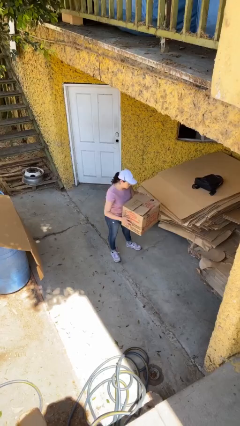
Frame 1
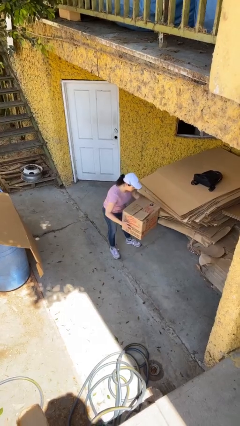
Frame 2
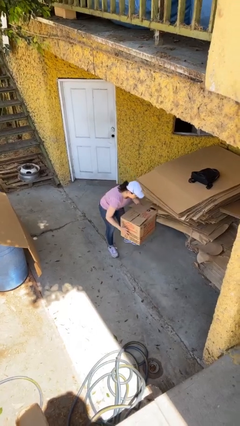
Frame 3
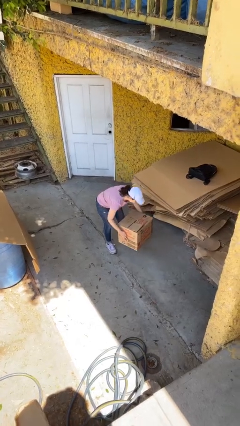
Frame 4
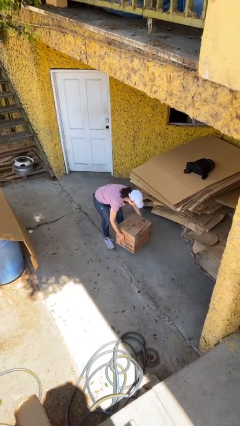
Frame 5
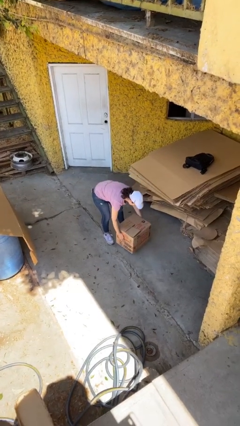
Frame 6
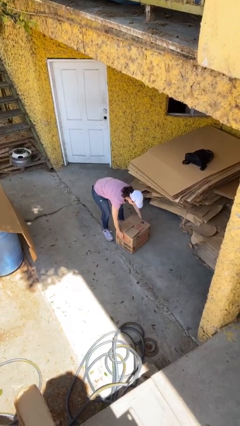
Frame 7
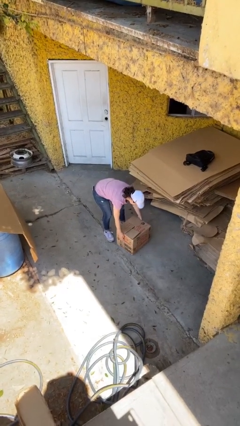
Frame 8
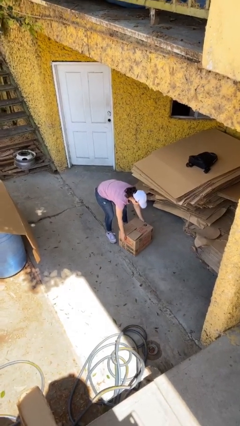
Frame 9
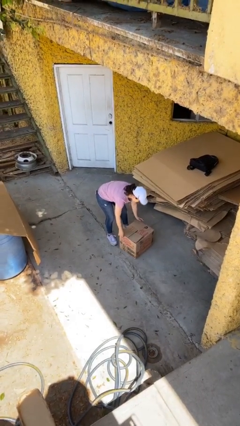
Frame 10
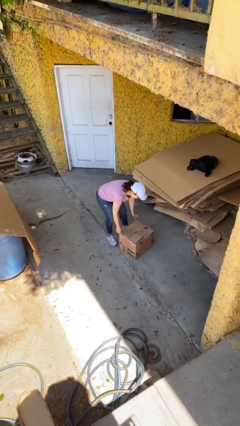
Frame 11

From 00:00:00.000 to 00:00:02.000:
person puts down object on floor

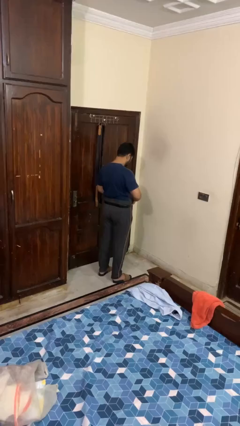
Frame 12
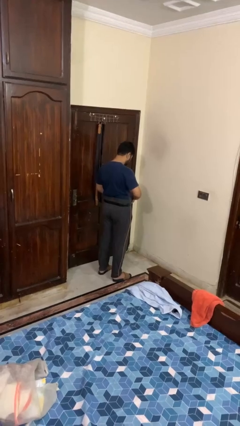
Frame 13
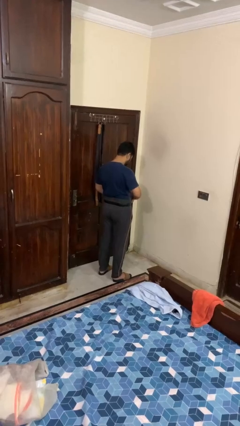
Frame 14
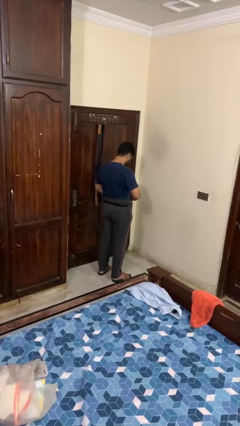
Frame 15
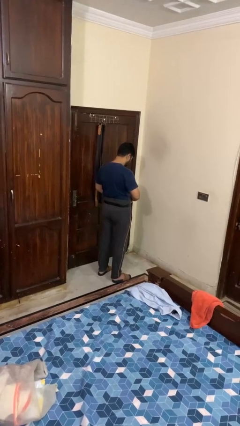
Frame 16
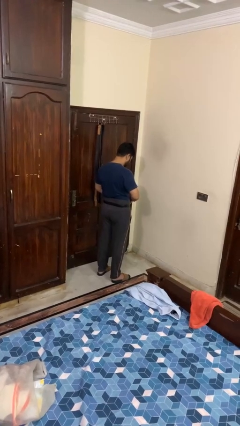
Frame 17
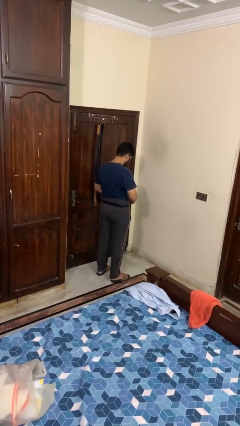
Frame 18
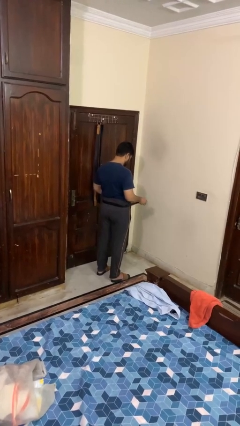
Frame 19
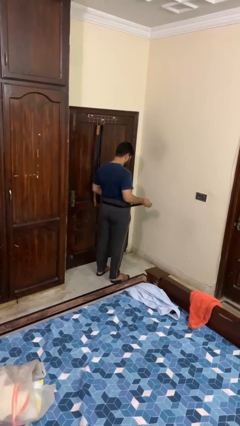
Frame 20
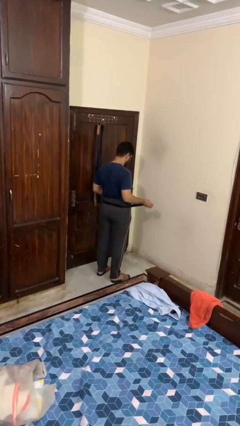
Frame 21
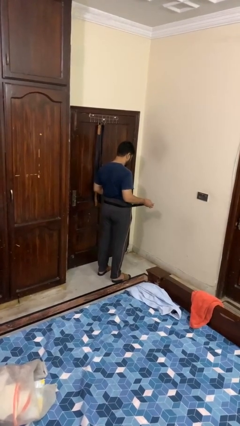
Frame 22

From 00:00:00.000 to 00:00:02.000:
person takes off belt

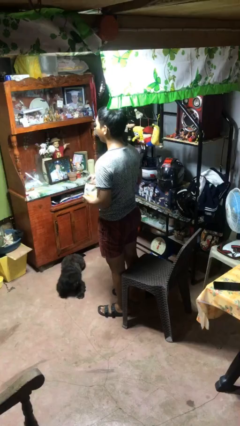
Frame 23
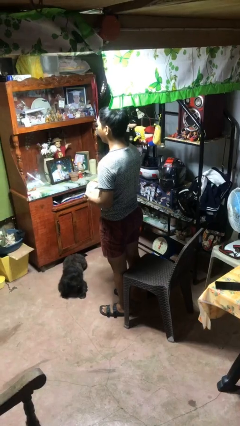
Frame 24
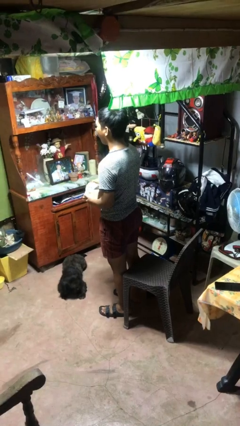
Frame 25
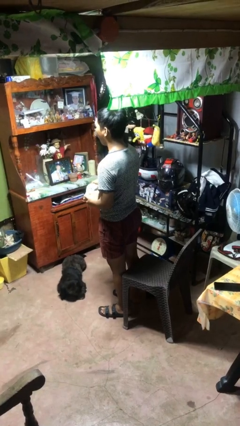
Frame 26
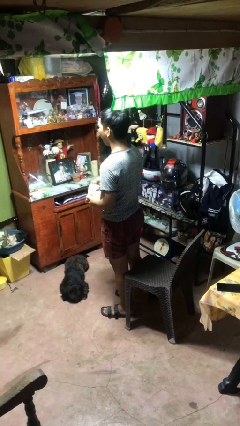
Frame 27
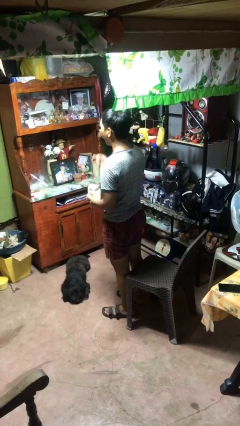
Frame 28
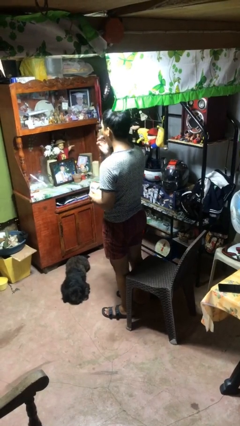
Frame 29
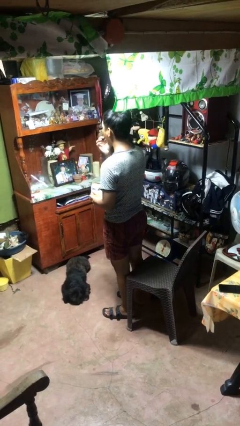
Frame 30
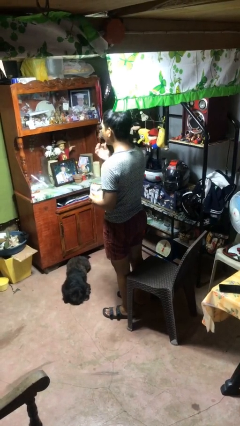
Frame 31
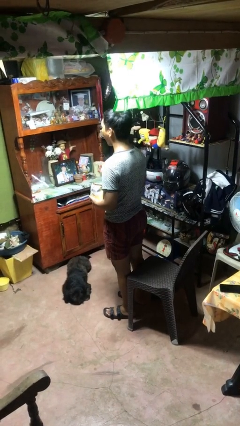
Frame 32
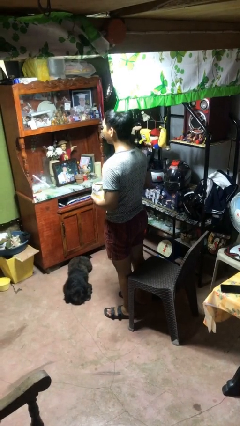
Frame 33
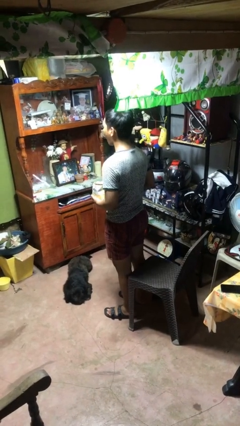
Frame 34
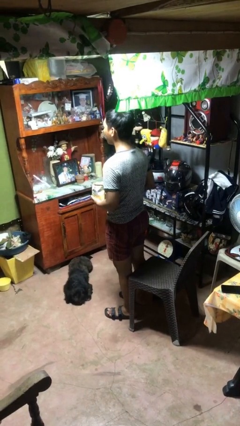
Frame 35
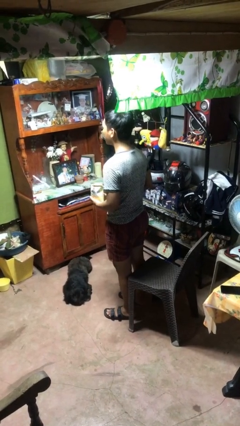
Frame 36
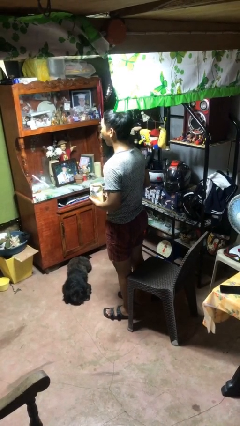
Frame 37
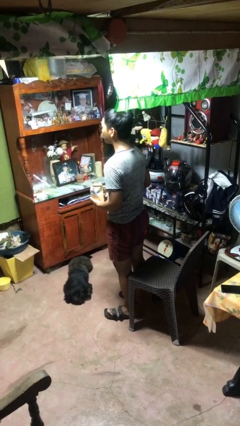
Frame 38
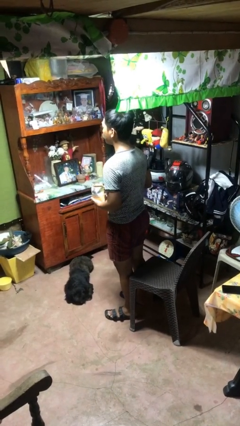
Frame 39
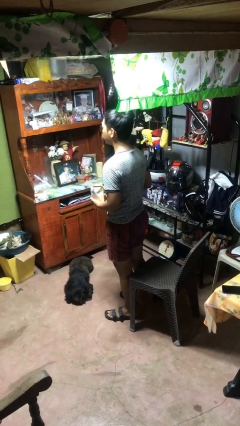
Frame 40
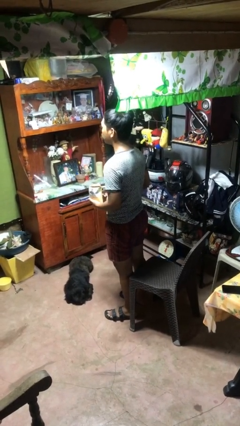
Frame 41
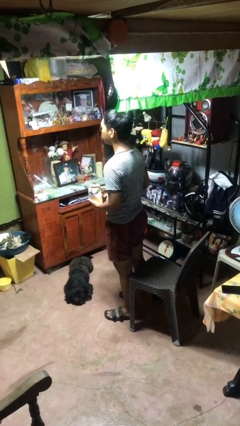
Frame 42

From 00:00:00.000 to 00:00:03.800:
person eats snack from bag

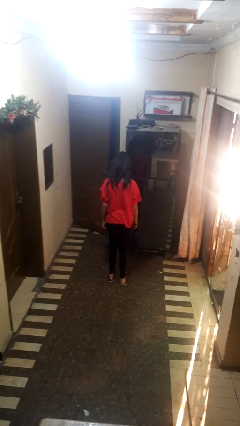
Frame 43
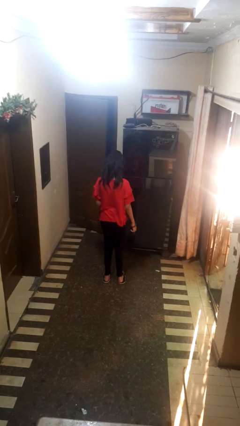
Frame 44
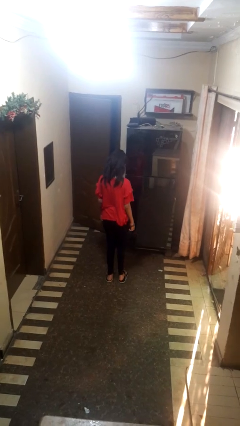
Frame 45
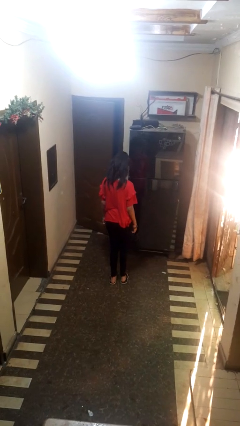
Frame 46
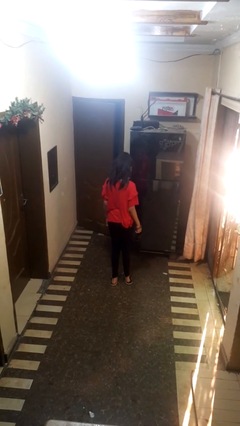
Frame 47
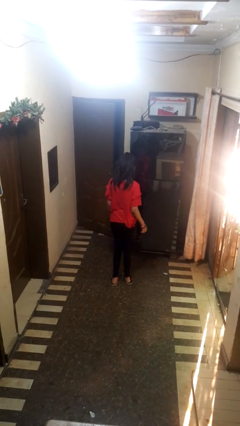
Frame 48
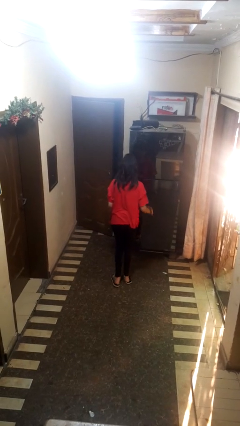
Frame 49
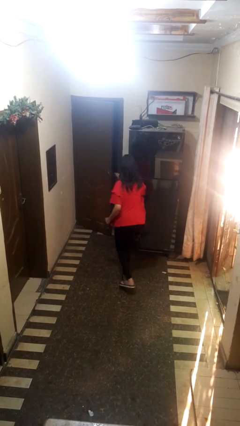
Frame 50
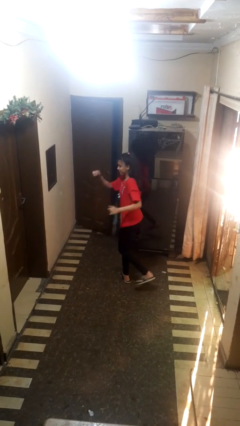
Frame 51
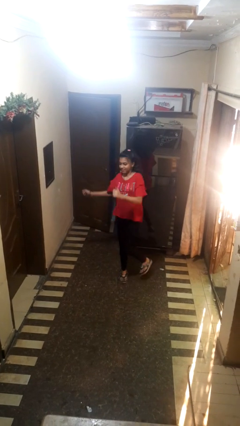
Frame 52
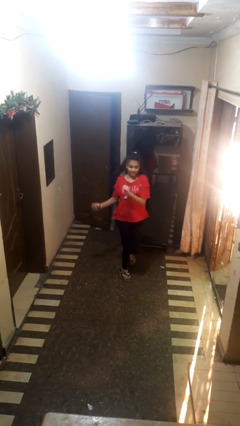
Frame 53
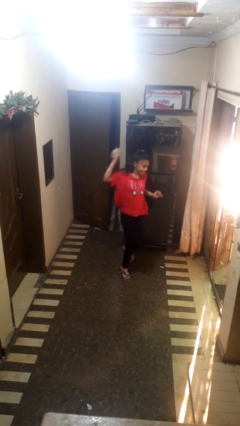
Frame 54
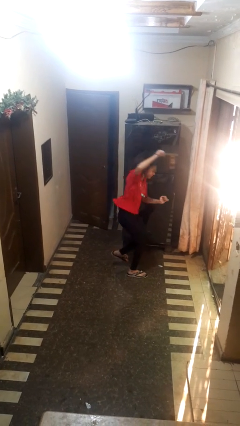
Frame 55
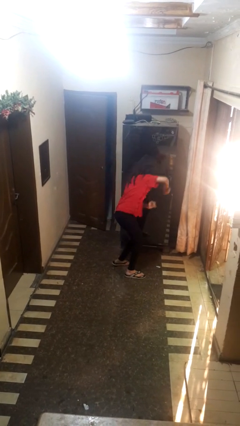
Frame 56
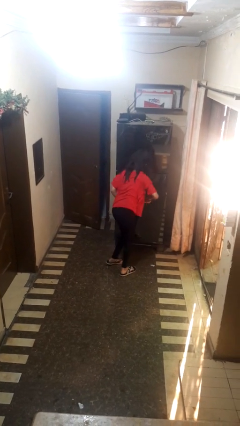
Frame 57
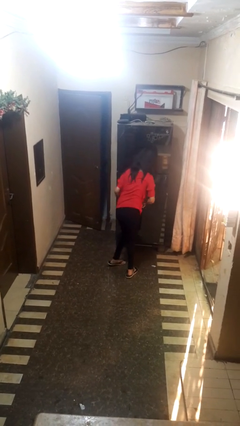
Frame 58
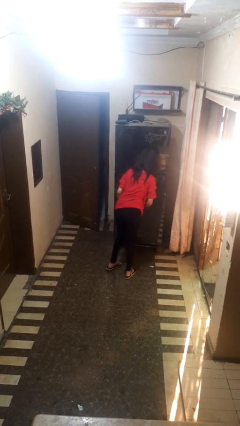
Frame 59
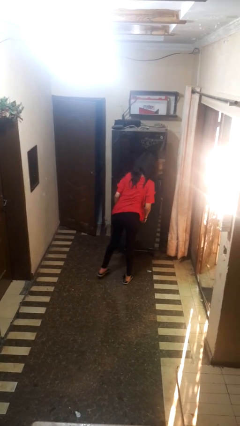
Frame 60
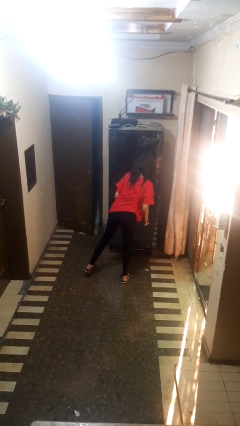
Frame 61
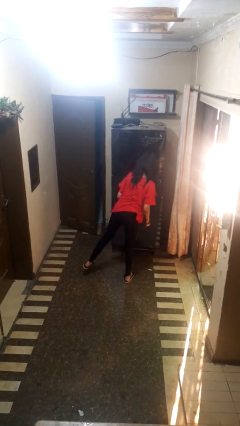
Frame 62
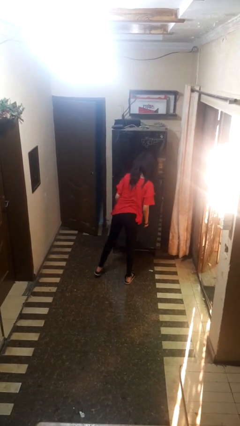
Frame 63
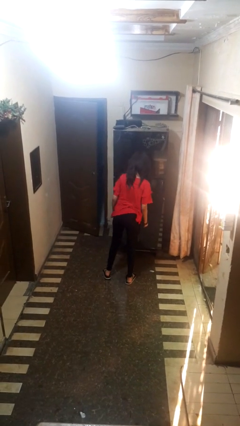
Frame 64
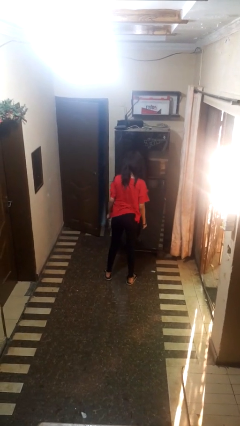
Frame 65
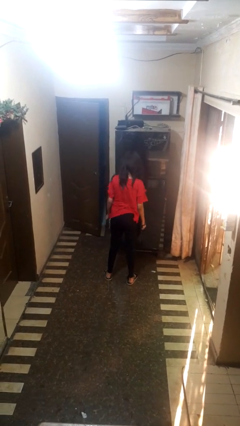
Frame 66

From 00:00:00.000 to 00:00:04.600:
person twirls

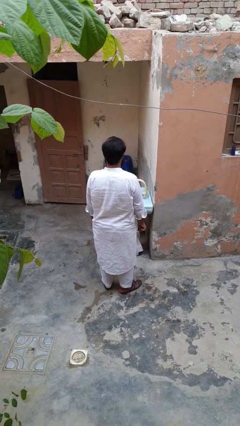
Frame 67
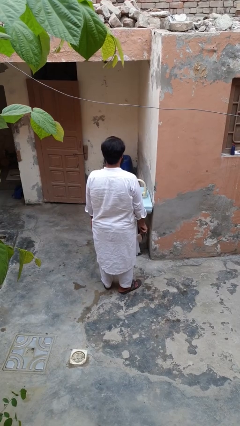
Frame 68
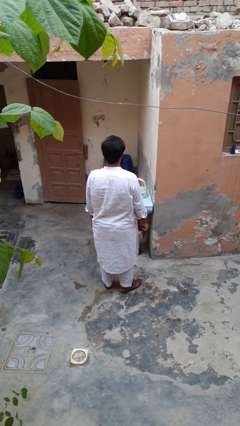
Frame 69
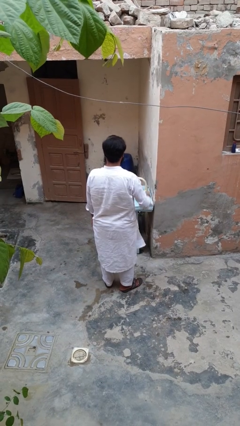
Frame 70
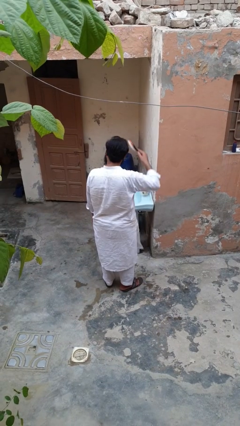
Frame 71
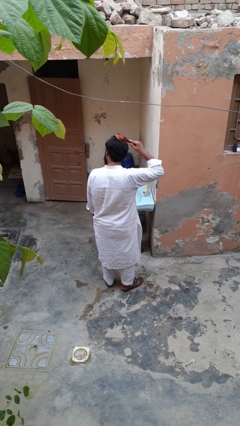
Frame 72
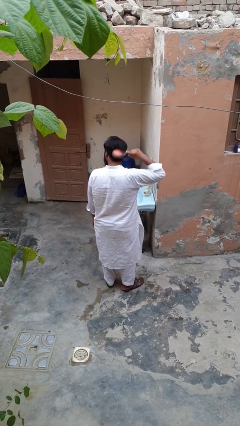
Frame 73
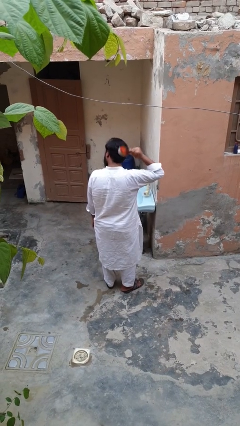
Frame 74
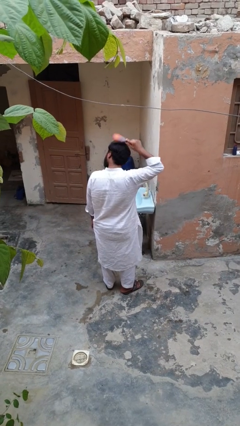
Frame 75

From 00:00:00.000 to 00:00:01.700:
person brushes hair

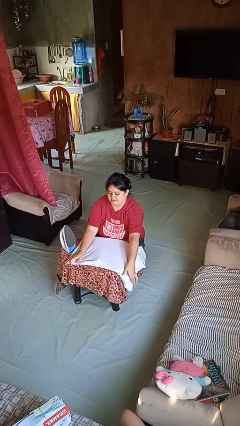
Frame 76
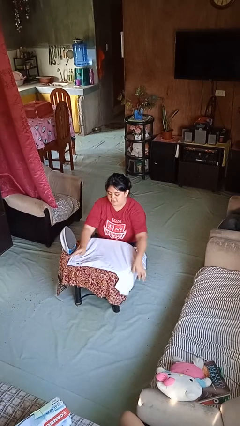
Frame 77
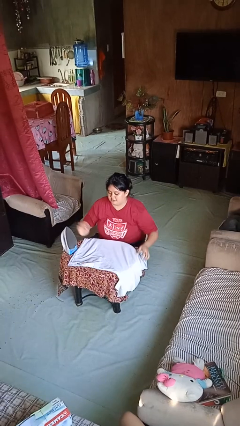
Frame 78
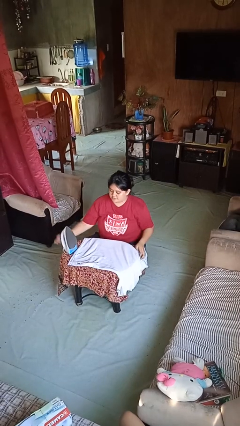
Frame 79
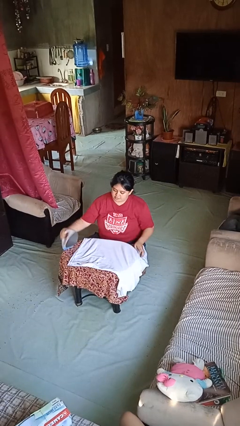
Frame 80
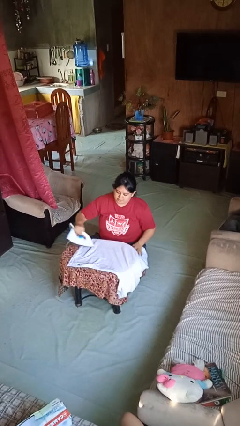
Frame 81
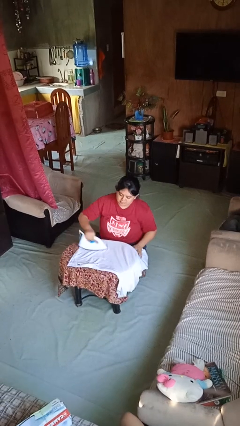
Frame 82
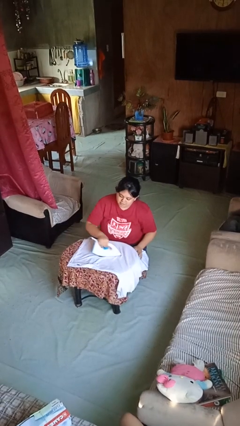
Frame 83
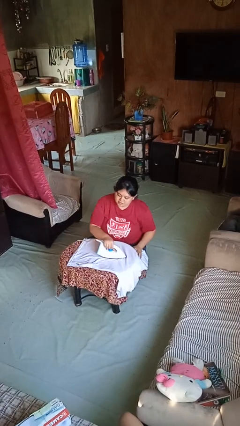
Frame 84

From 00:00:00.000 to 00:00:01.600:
person irons clothes

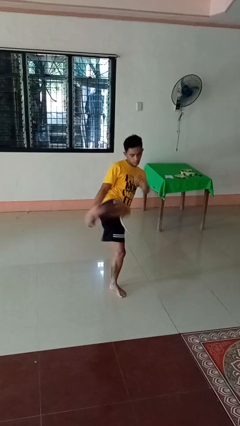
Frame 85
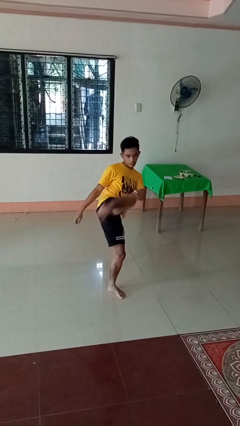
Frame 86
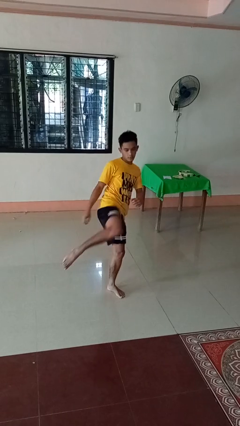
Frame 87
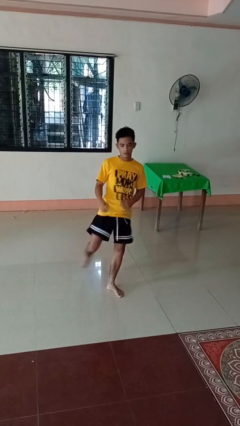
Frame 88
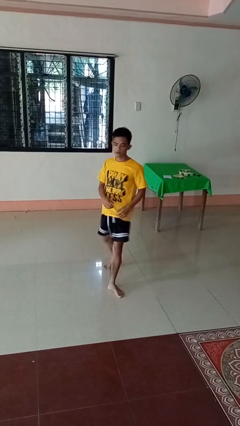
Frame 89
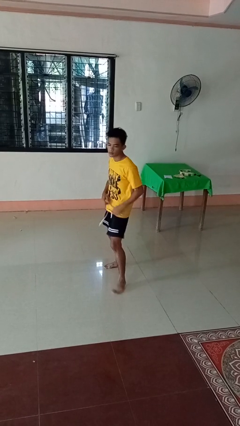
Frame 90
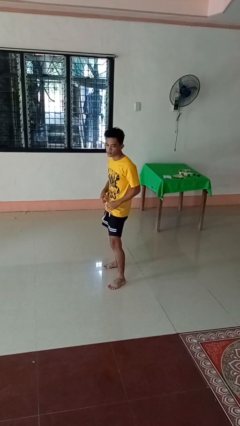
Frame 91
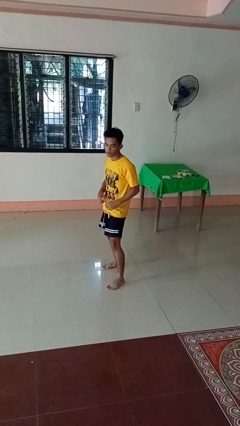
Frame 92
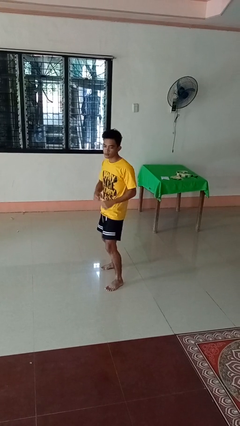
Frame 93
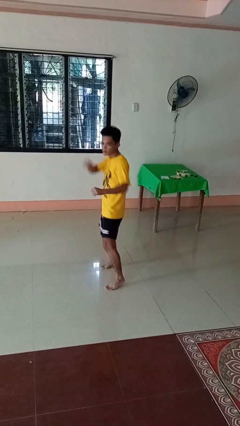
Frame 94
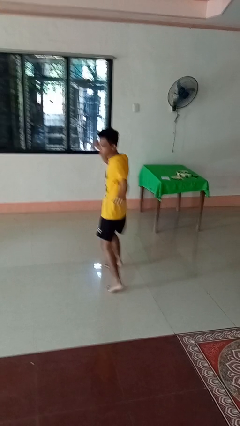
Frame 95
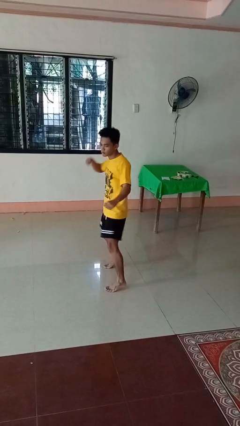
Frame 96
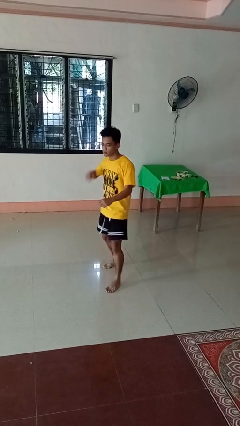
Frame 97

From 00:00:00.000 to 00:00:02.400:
person karate kicks
